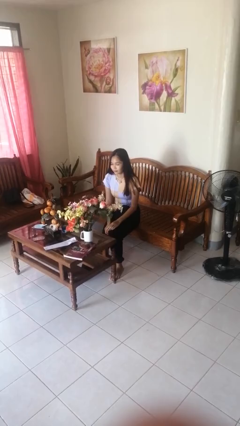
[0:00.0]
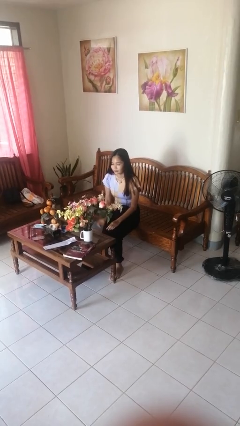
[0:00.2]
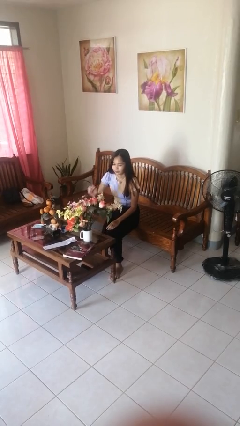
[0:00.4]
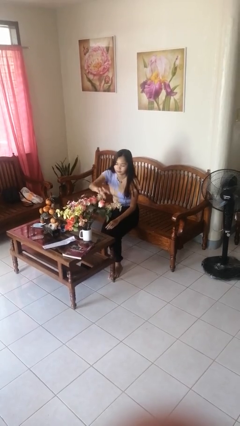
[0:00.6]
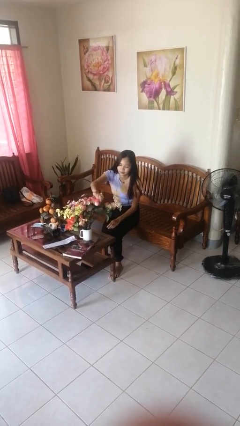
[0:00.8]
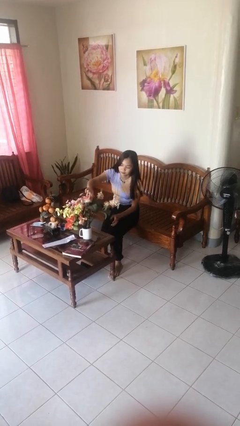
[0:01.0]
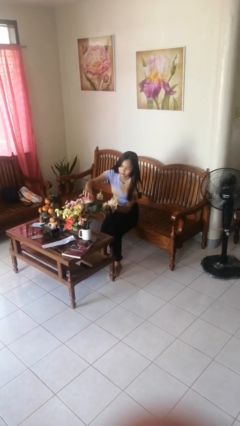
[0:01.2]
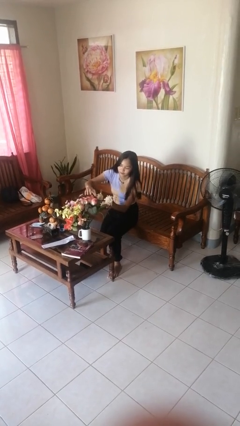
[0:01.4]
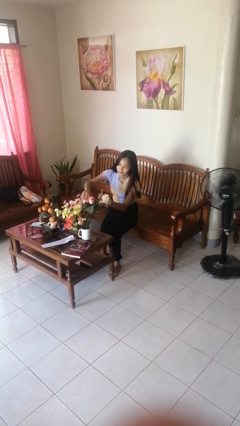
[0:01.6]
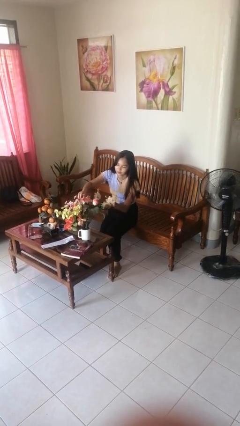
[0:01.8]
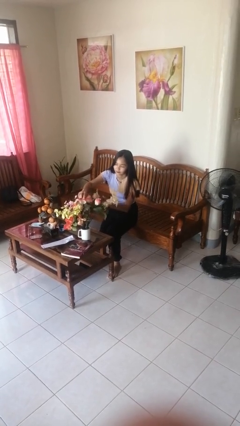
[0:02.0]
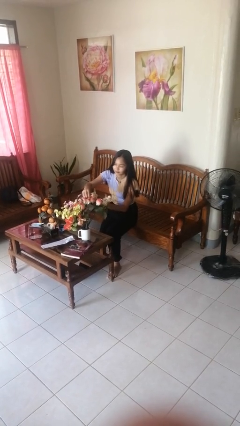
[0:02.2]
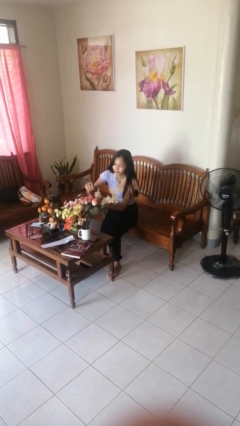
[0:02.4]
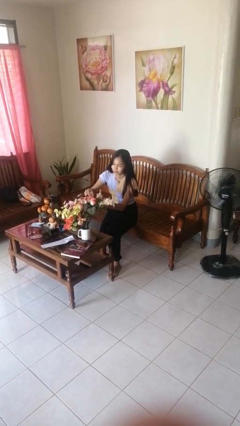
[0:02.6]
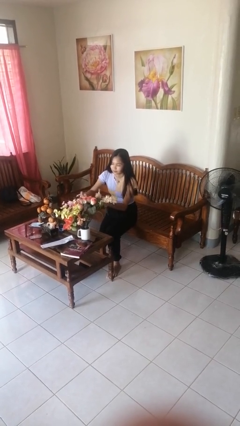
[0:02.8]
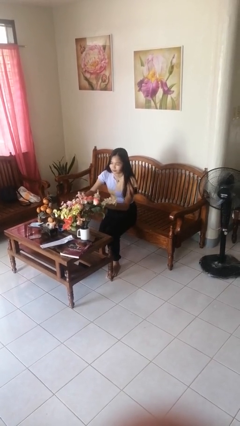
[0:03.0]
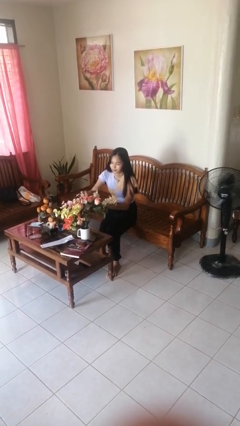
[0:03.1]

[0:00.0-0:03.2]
person arranges flowers in vase

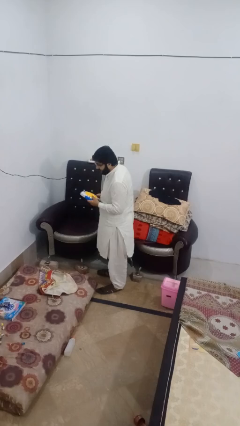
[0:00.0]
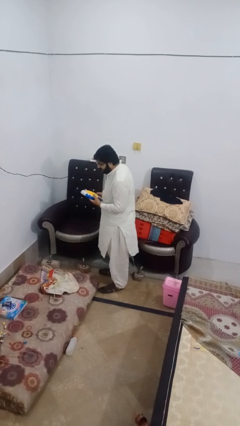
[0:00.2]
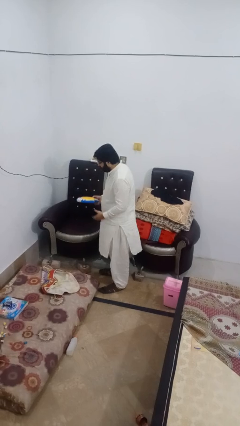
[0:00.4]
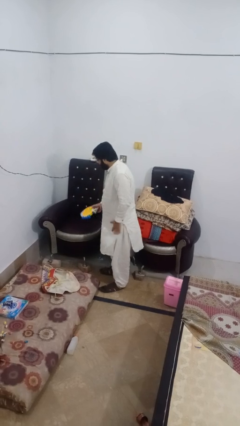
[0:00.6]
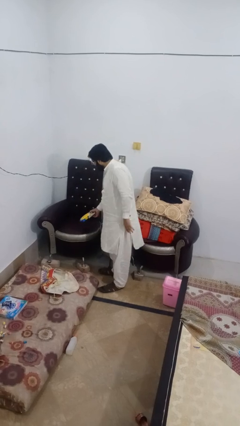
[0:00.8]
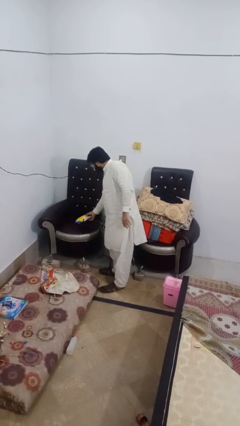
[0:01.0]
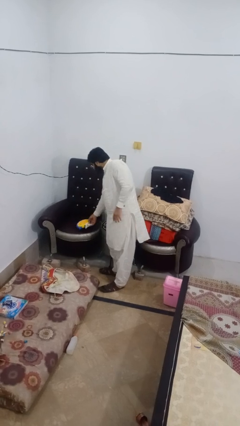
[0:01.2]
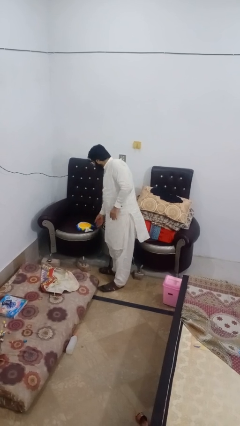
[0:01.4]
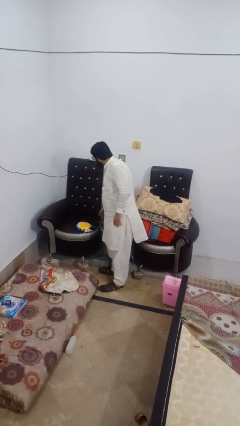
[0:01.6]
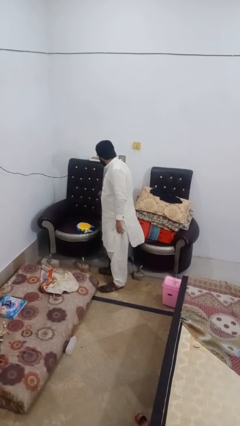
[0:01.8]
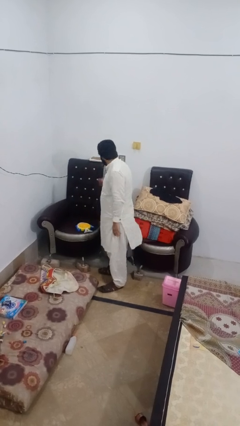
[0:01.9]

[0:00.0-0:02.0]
person puts down object on couch

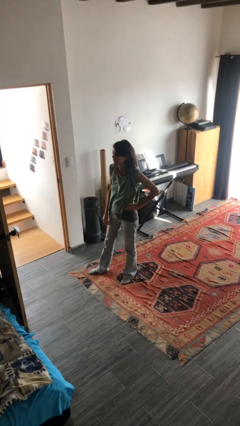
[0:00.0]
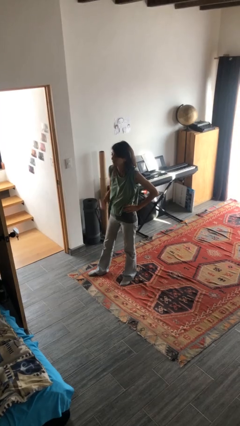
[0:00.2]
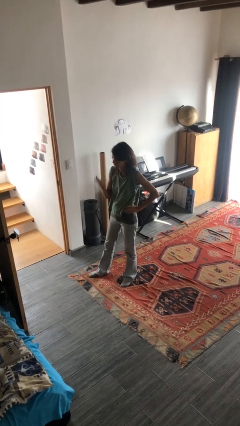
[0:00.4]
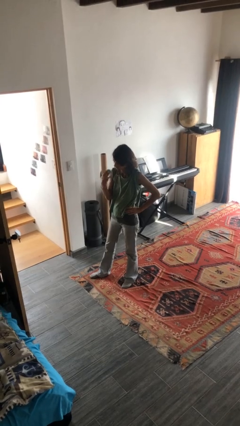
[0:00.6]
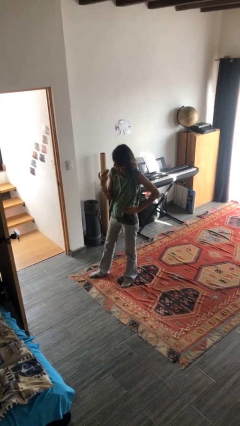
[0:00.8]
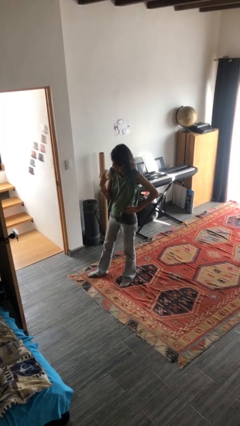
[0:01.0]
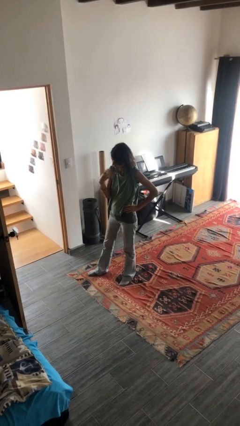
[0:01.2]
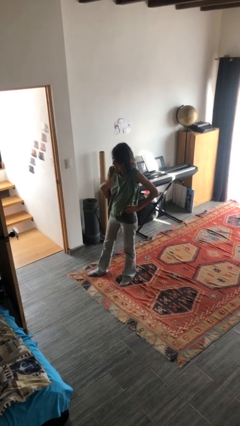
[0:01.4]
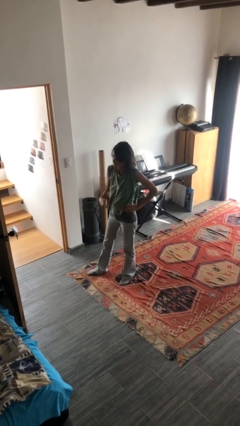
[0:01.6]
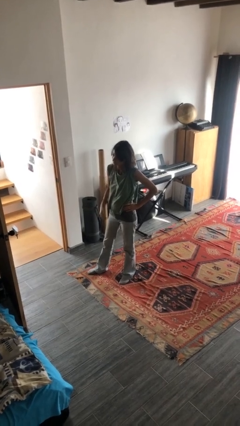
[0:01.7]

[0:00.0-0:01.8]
person gestures come here

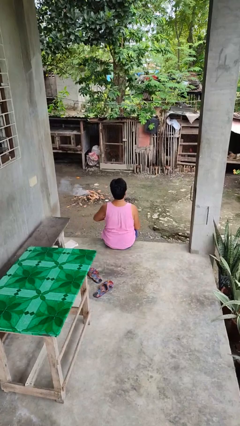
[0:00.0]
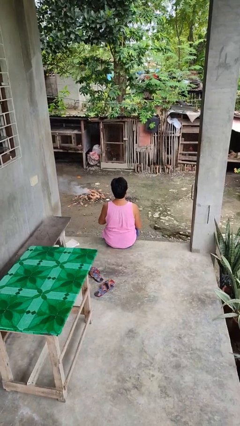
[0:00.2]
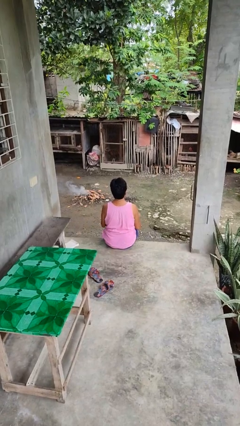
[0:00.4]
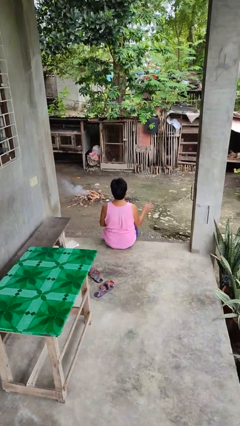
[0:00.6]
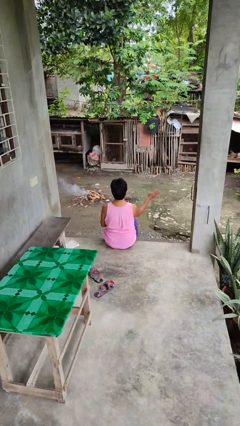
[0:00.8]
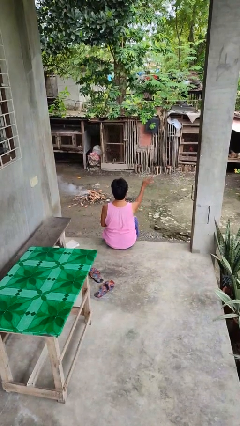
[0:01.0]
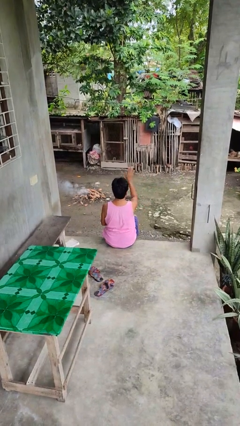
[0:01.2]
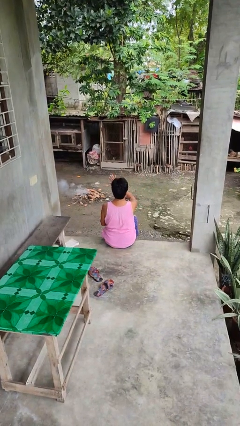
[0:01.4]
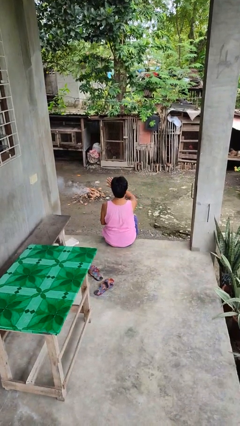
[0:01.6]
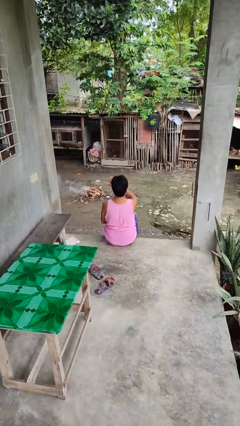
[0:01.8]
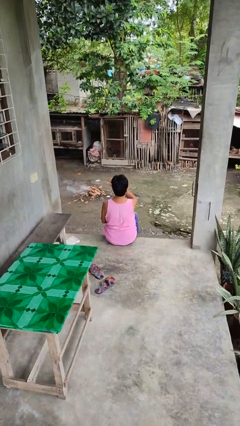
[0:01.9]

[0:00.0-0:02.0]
person gestures swipe left

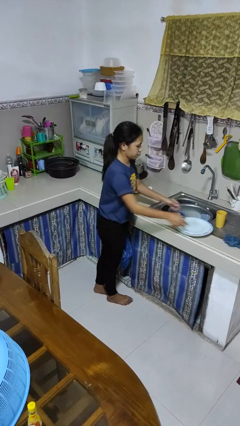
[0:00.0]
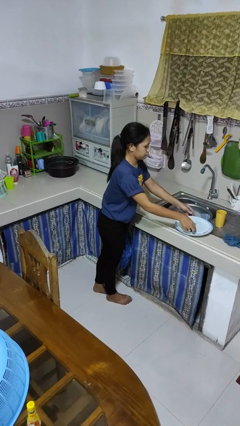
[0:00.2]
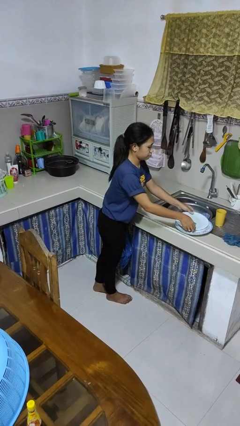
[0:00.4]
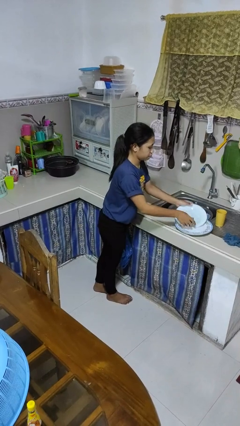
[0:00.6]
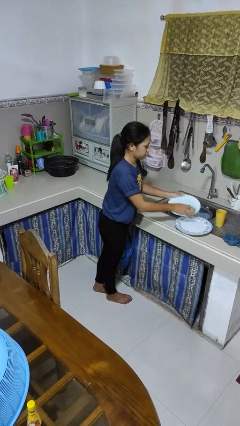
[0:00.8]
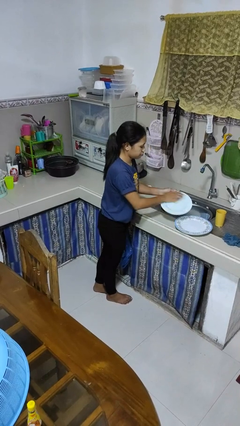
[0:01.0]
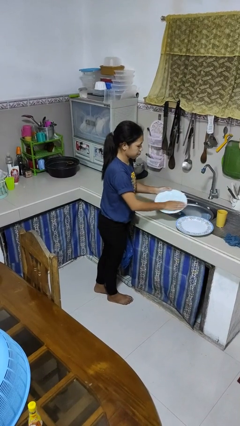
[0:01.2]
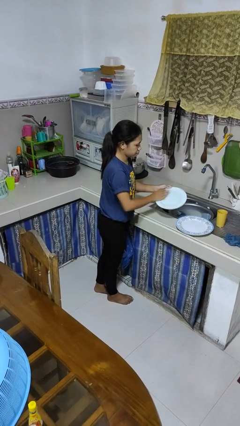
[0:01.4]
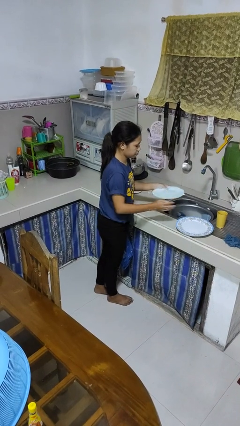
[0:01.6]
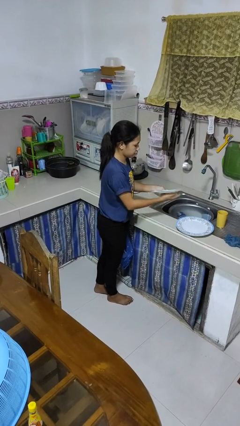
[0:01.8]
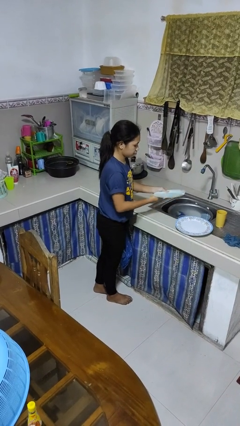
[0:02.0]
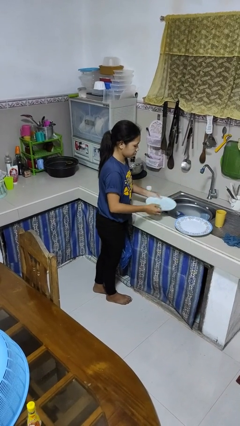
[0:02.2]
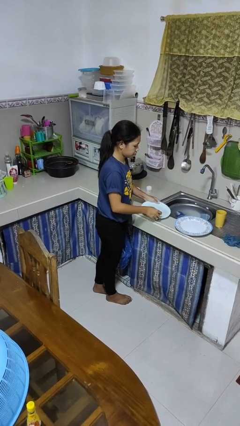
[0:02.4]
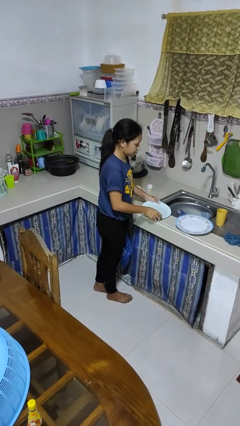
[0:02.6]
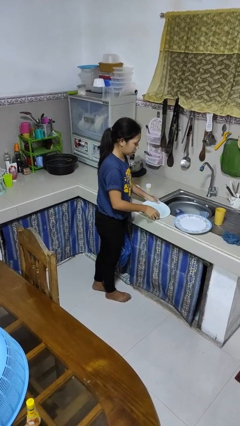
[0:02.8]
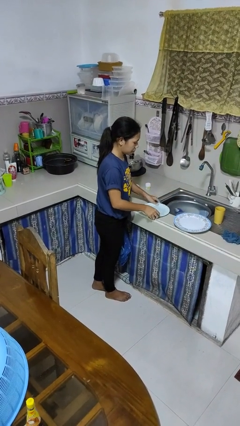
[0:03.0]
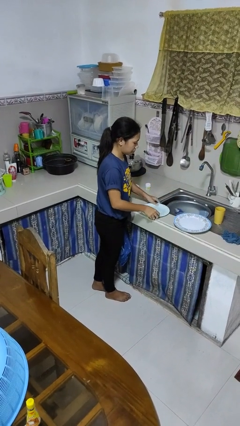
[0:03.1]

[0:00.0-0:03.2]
person washes dish

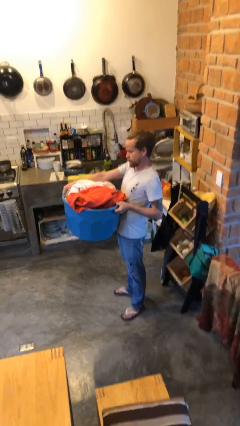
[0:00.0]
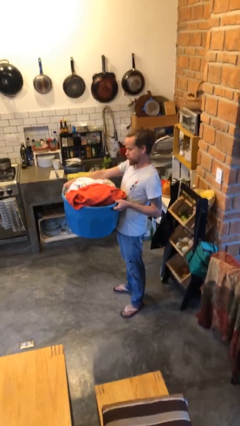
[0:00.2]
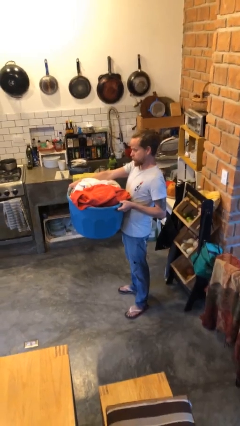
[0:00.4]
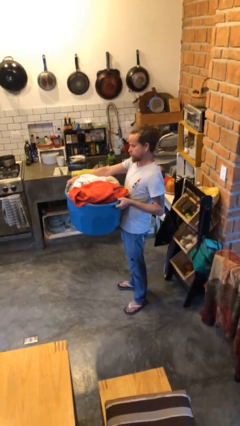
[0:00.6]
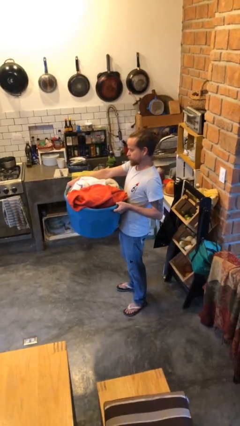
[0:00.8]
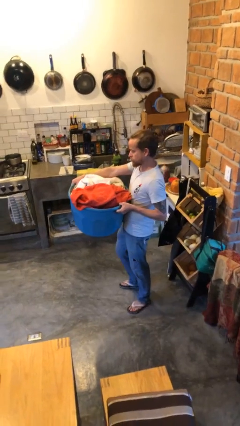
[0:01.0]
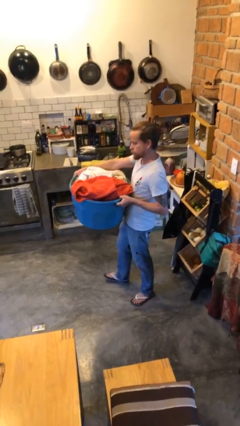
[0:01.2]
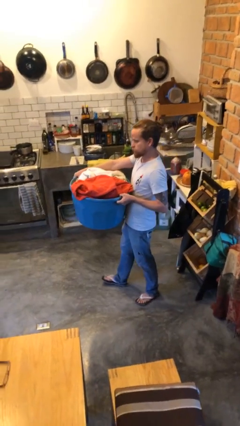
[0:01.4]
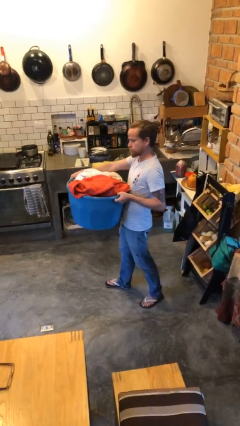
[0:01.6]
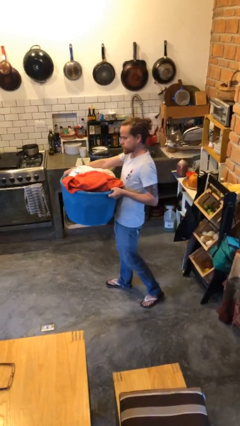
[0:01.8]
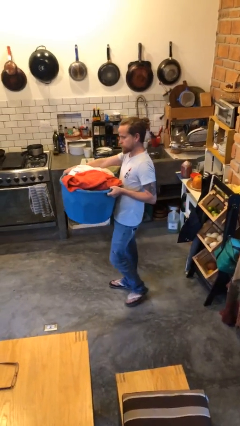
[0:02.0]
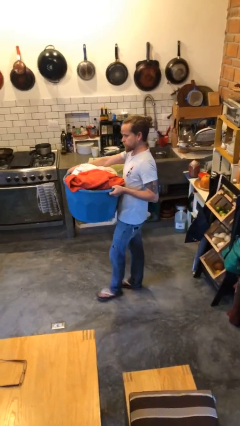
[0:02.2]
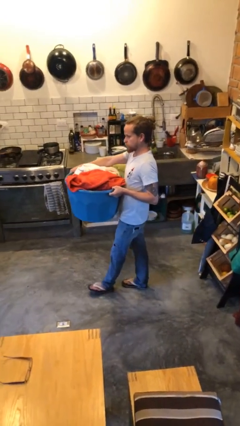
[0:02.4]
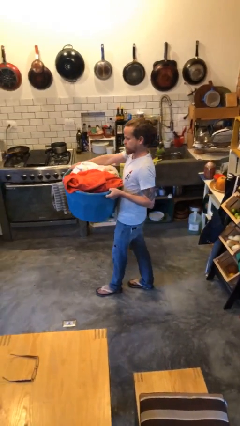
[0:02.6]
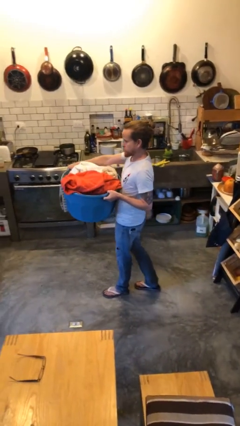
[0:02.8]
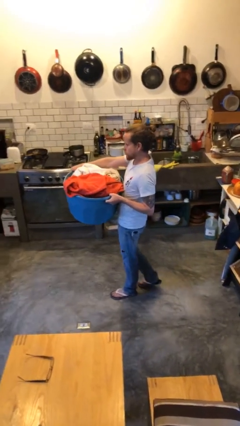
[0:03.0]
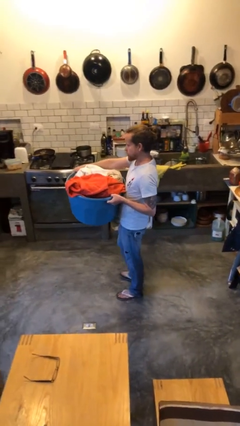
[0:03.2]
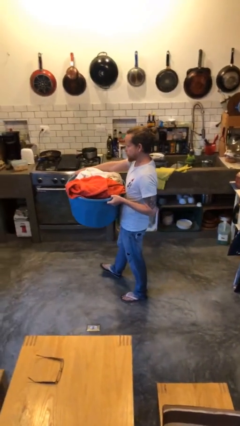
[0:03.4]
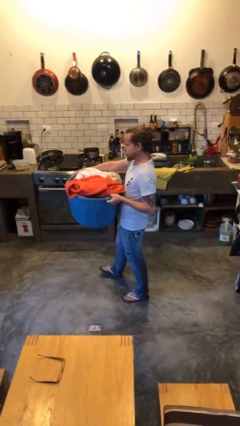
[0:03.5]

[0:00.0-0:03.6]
person carries laundry basket

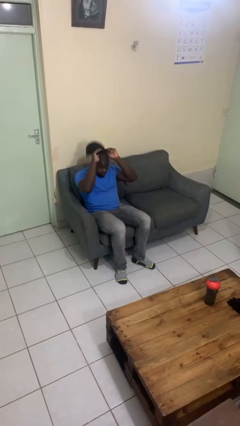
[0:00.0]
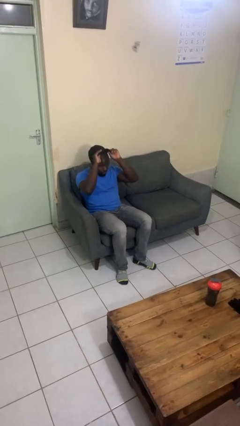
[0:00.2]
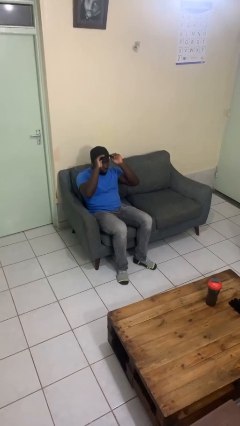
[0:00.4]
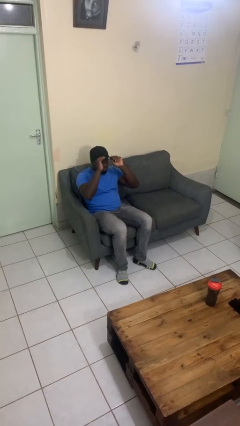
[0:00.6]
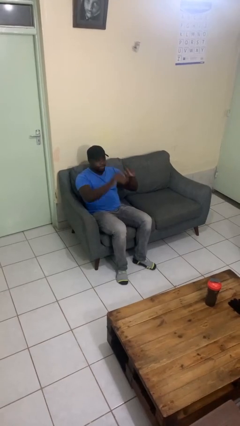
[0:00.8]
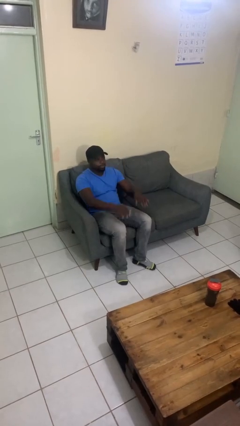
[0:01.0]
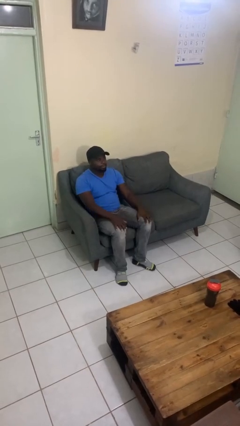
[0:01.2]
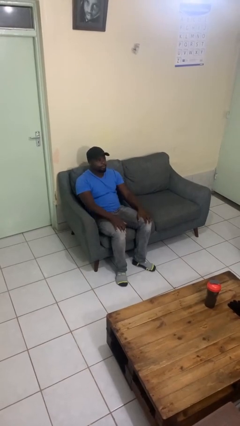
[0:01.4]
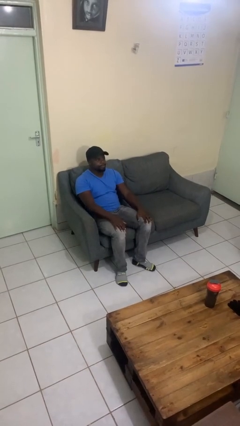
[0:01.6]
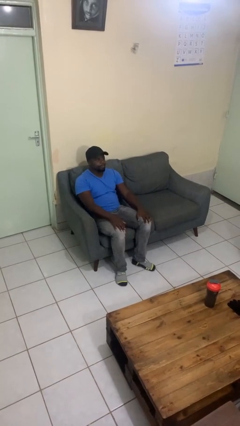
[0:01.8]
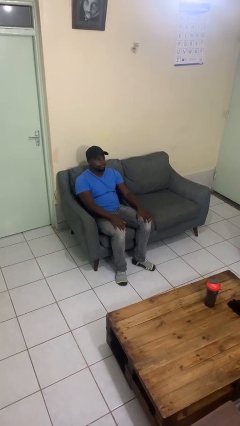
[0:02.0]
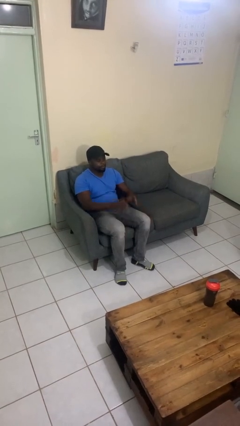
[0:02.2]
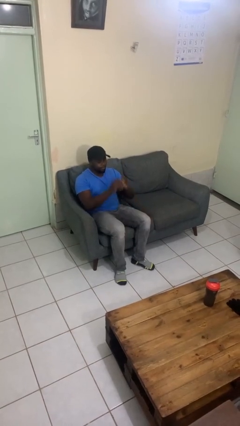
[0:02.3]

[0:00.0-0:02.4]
person puts on hat
